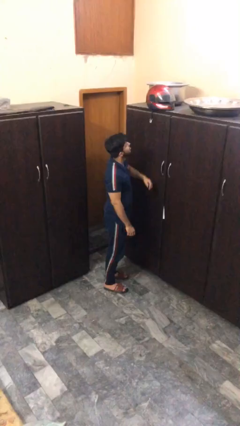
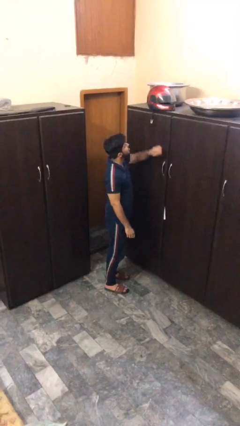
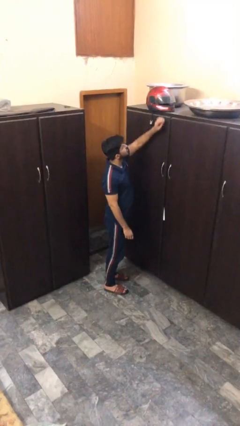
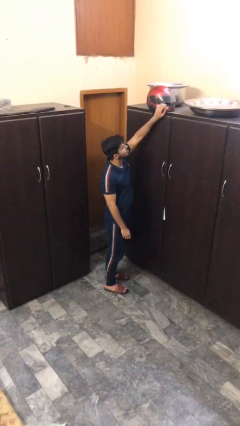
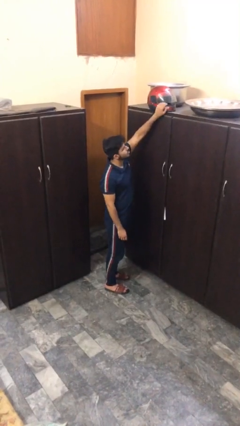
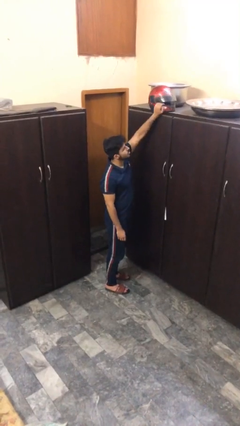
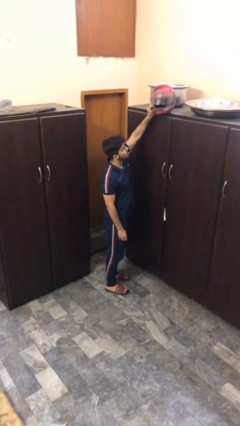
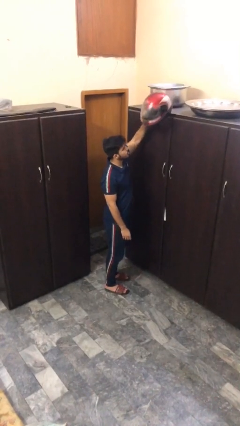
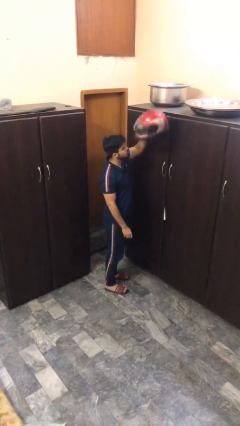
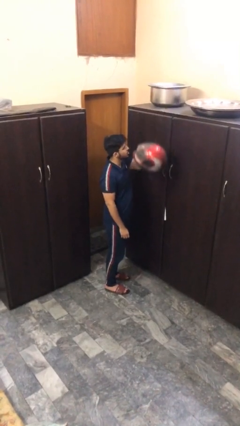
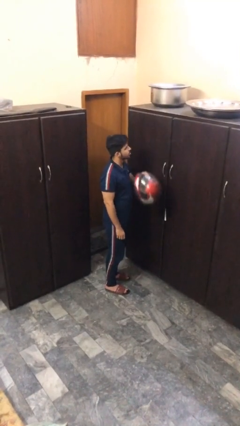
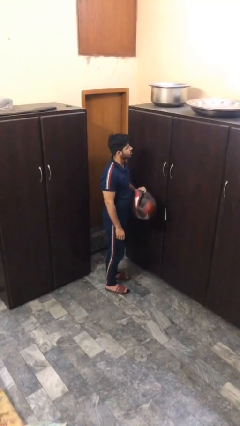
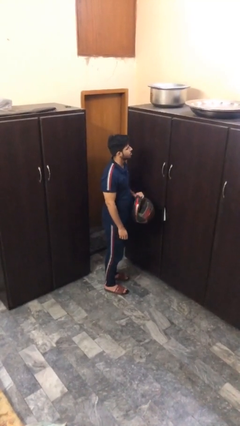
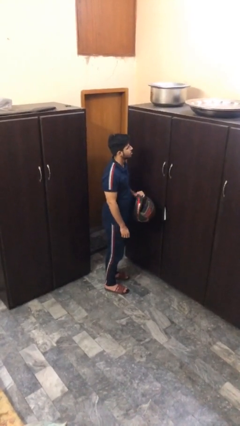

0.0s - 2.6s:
person picks up object from shelf

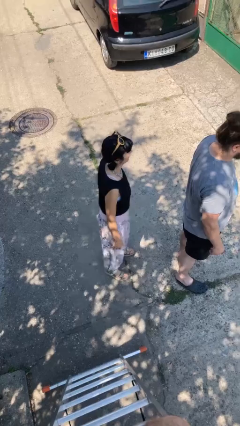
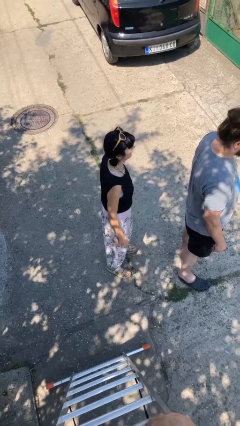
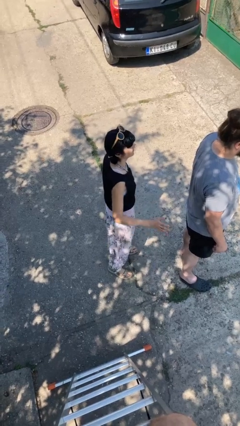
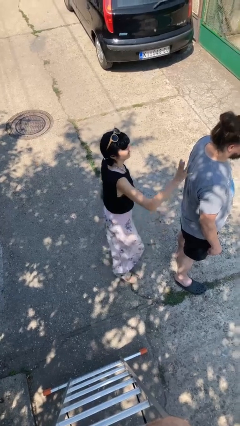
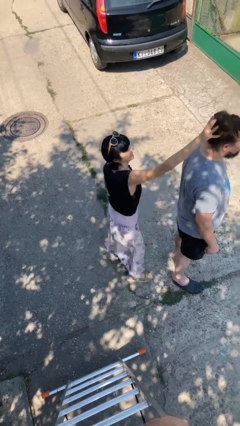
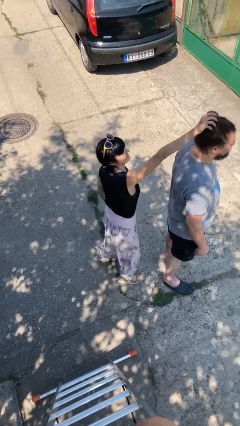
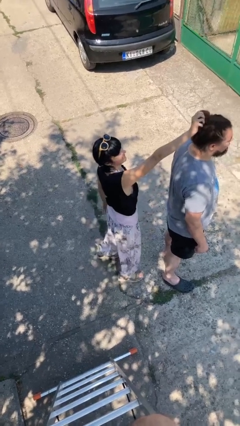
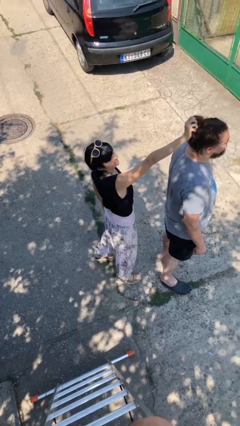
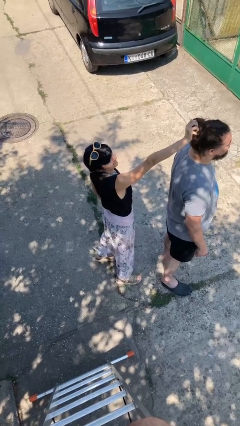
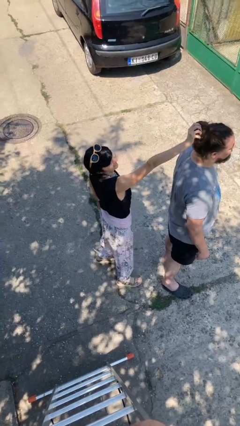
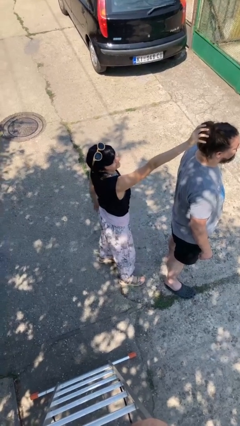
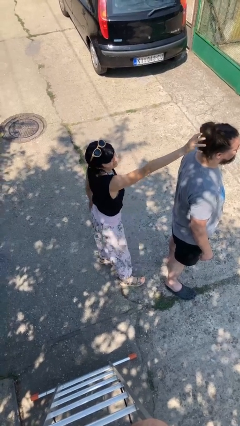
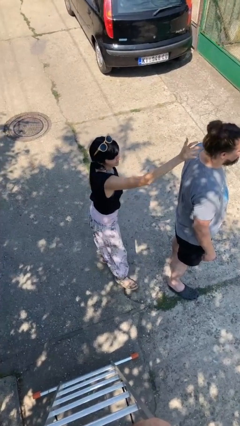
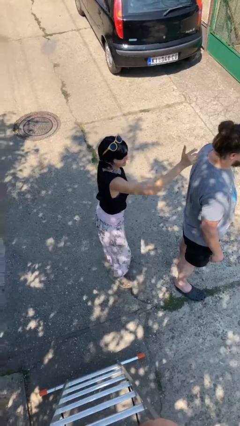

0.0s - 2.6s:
person grabs person by hair

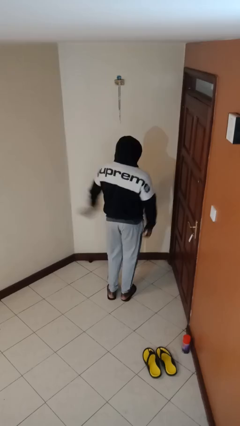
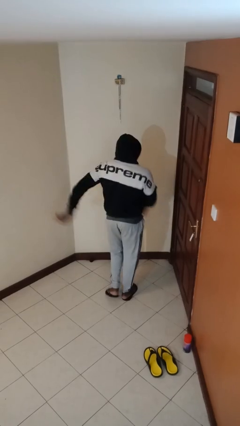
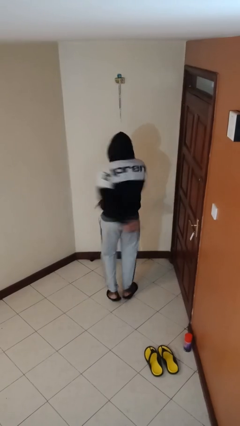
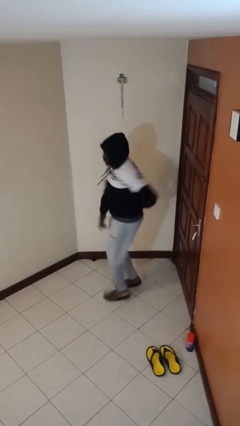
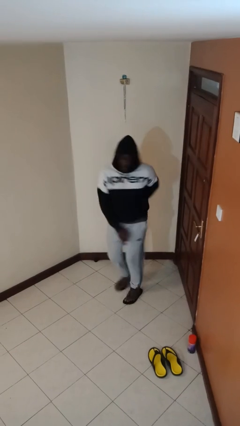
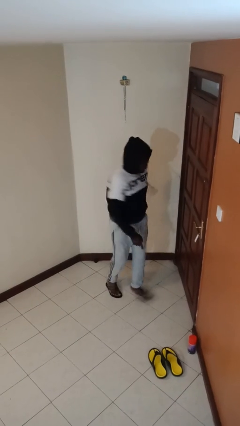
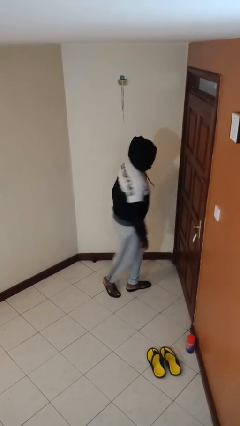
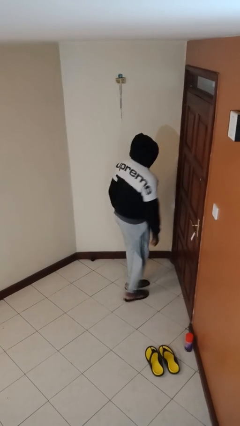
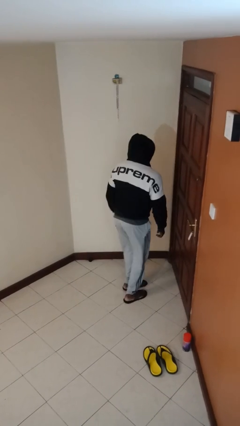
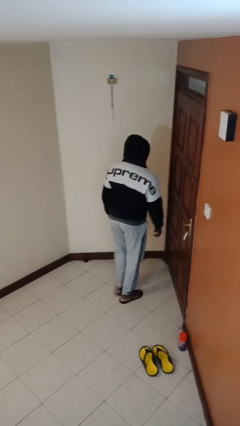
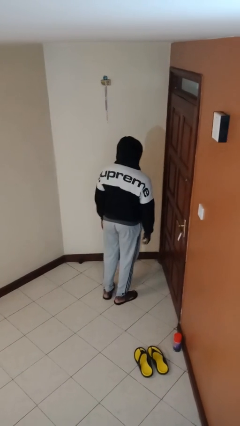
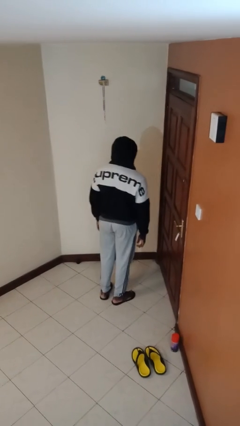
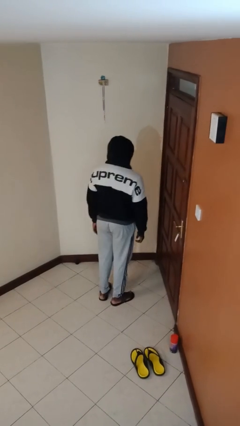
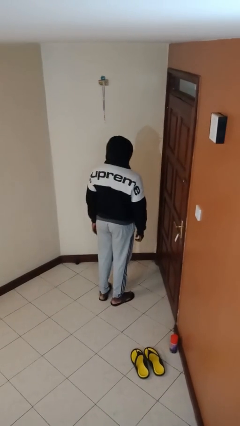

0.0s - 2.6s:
person twirls

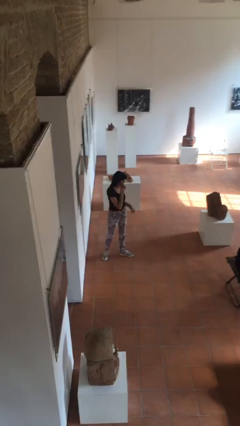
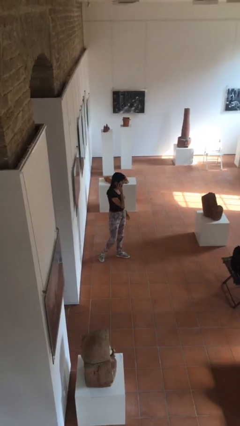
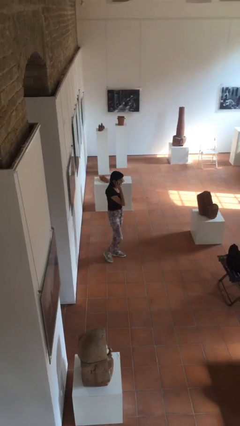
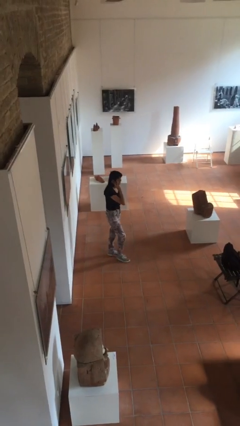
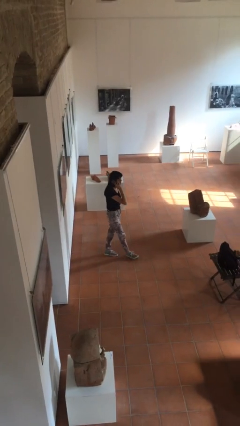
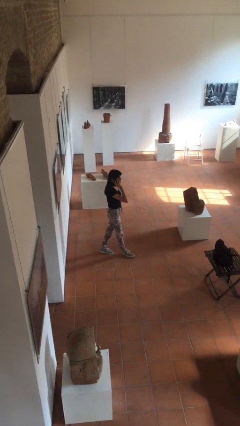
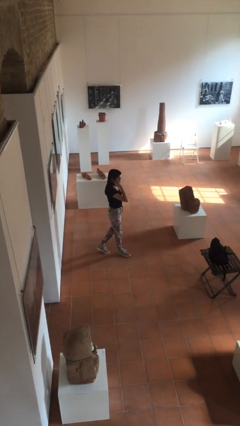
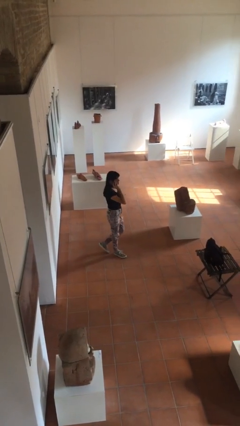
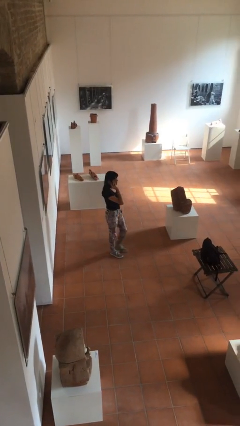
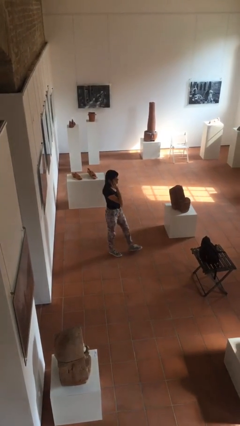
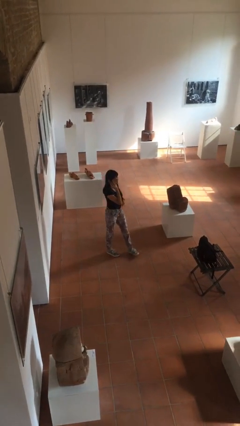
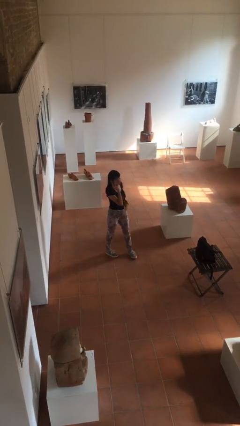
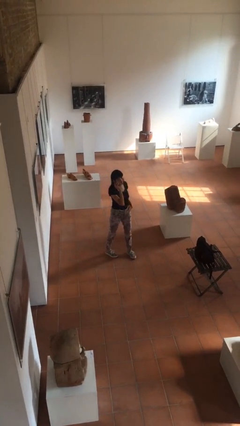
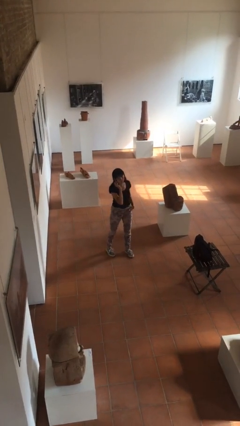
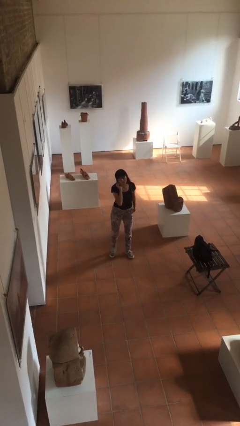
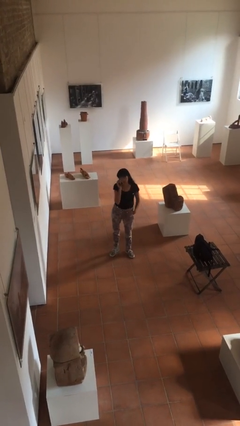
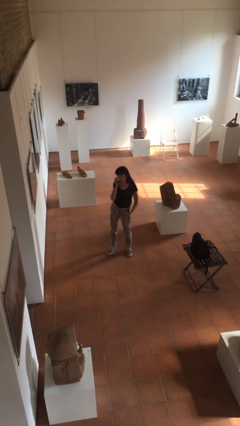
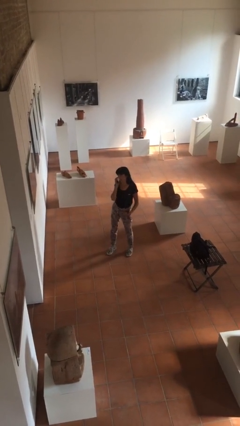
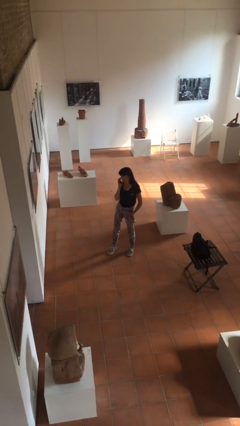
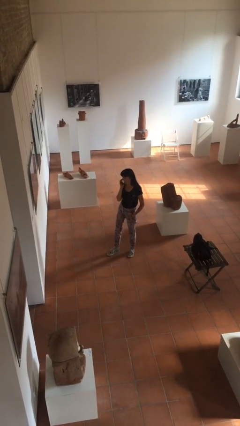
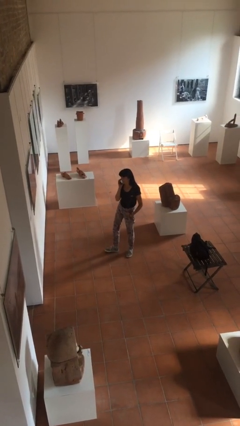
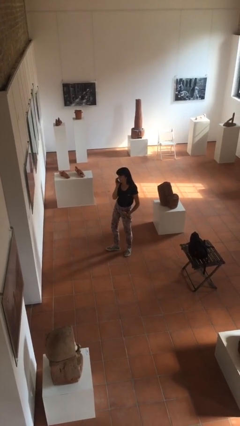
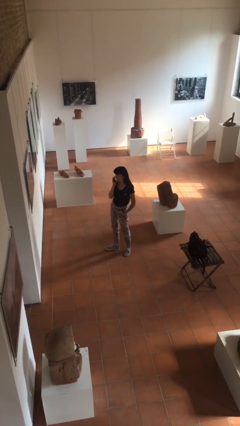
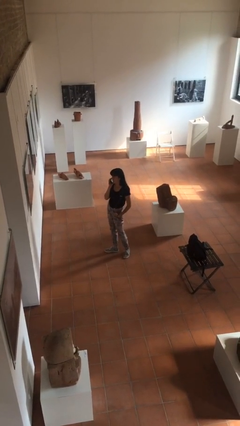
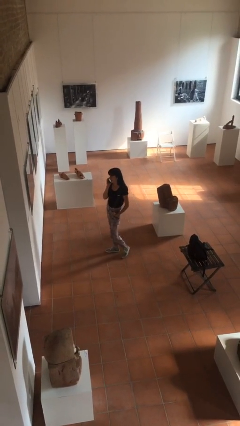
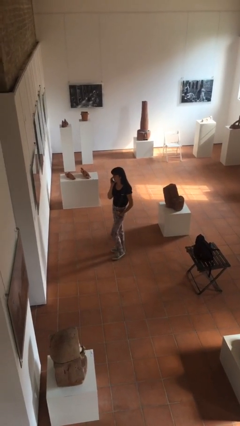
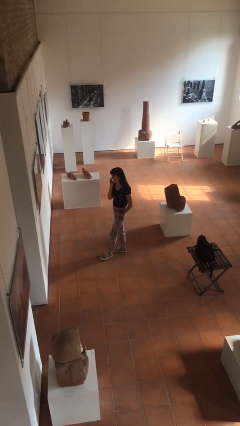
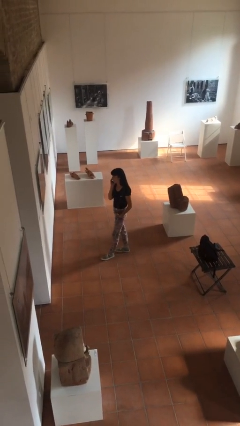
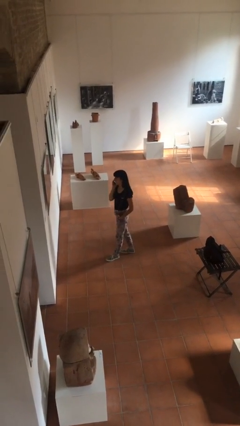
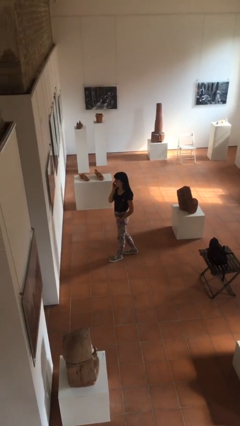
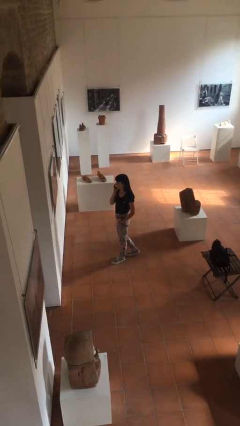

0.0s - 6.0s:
person talks on phone

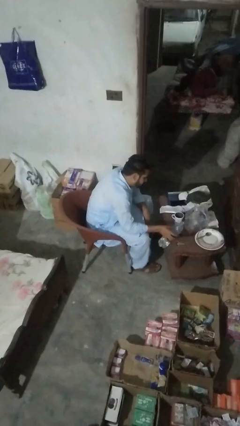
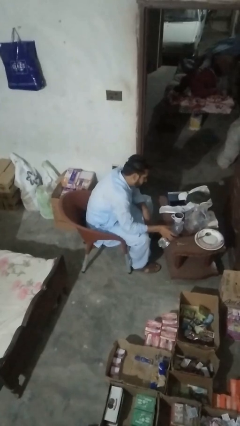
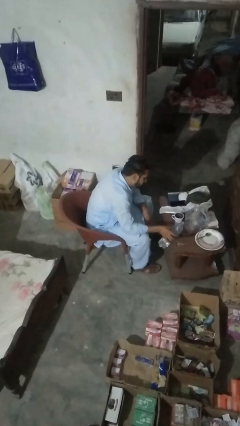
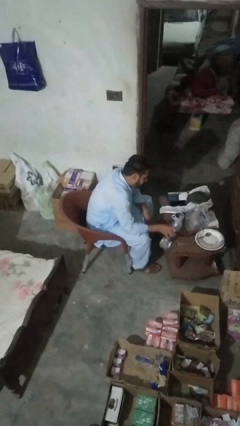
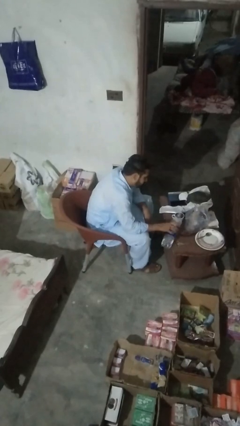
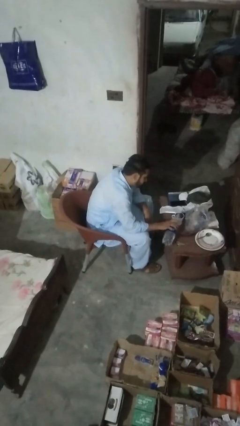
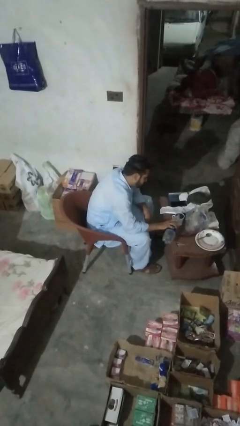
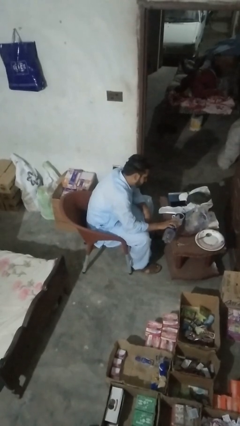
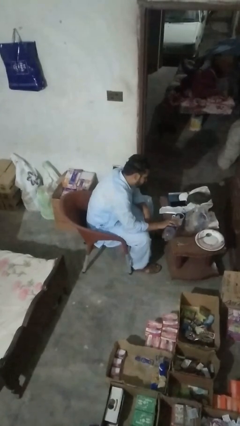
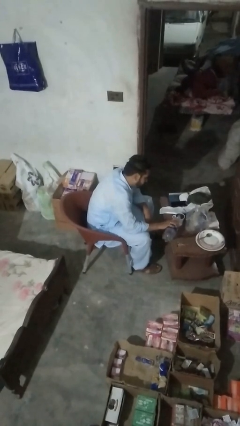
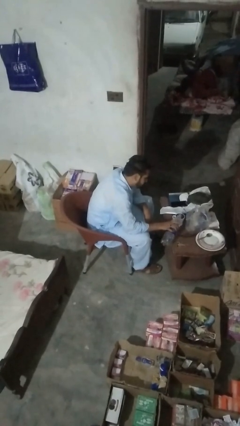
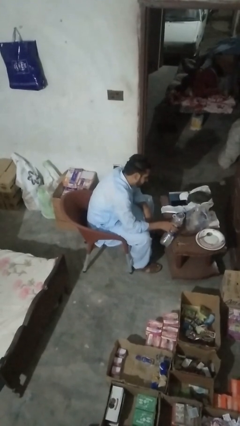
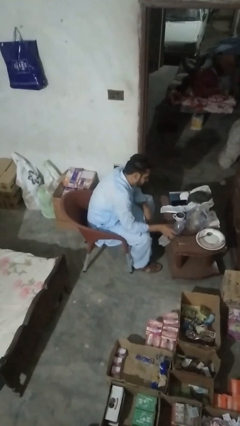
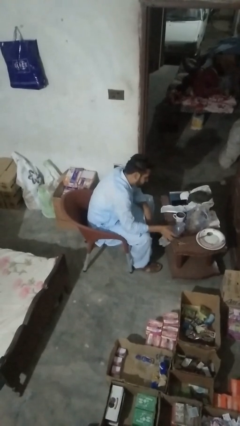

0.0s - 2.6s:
person pours liquid into cup

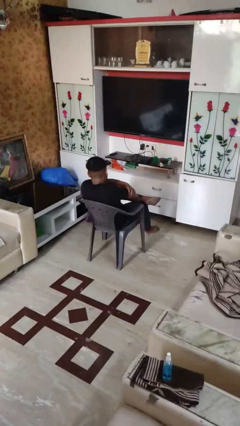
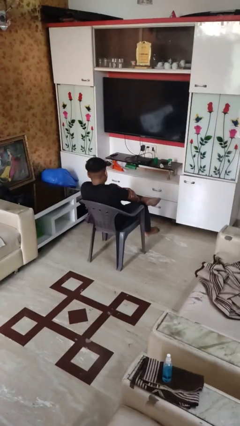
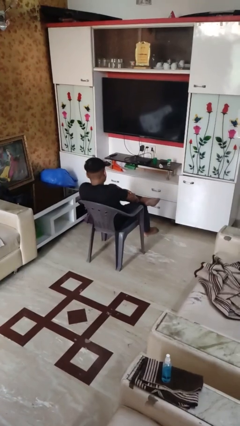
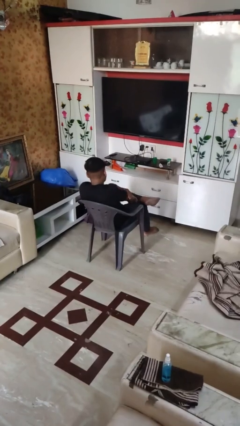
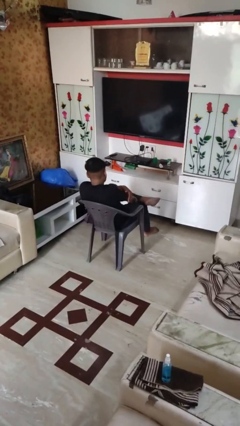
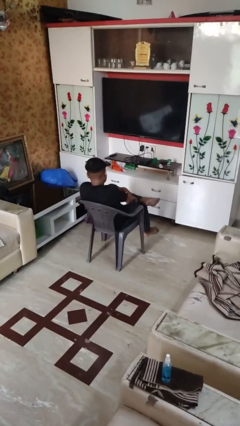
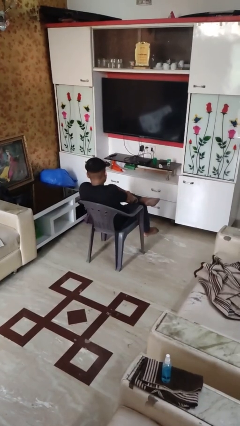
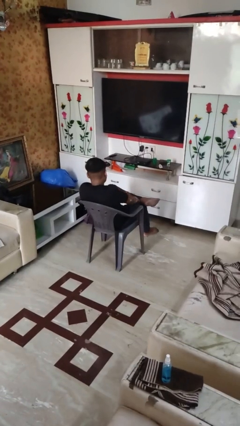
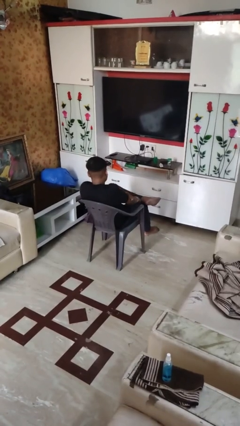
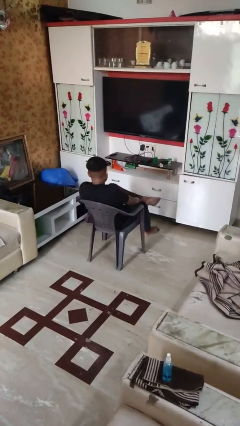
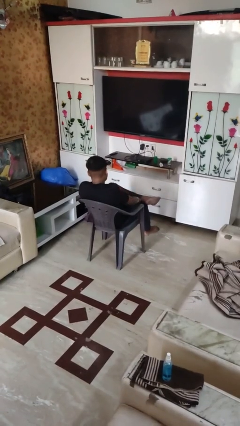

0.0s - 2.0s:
person swats bug
